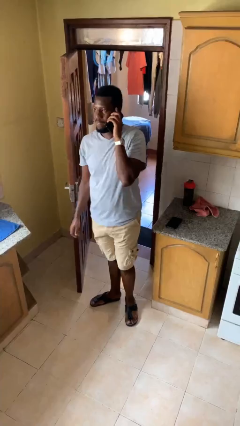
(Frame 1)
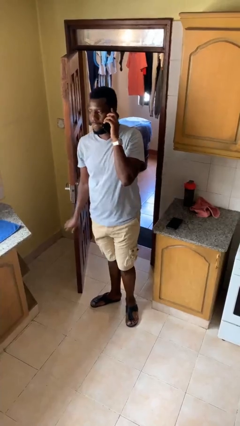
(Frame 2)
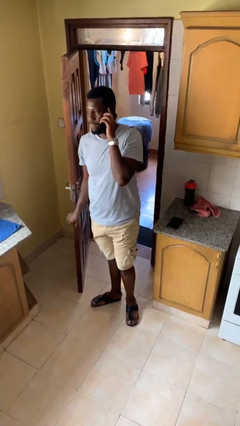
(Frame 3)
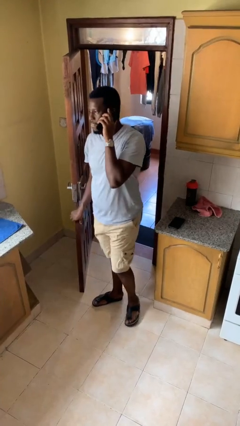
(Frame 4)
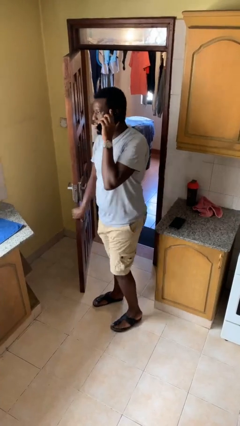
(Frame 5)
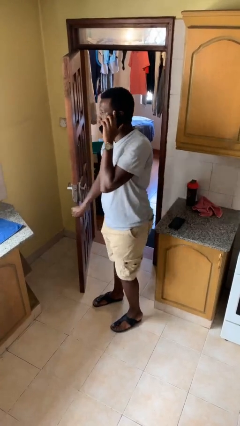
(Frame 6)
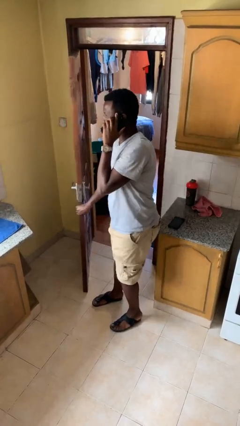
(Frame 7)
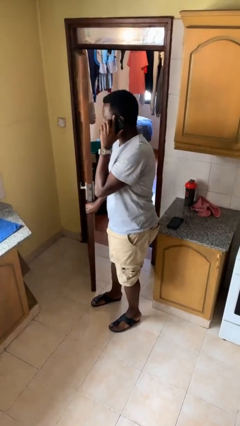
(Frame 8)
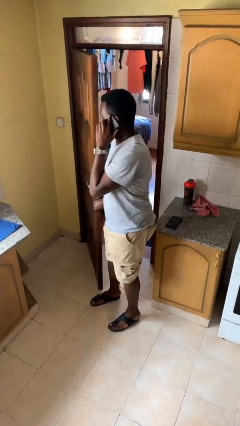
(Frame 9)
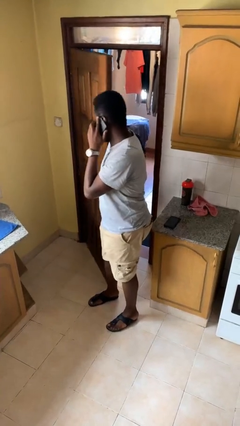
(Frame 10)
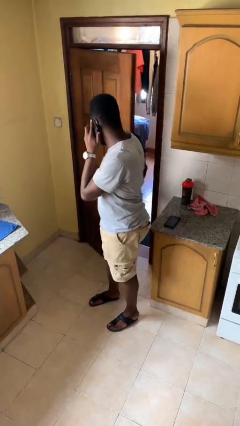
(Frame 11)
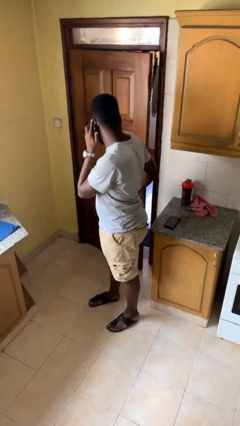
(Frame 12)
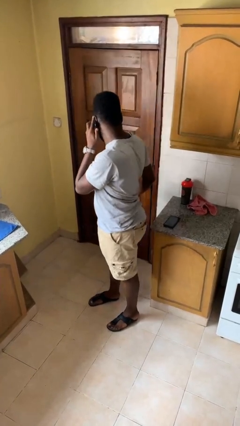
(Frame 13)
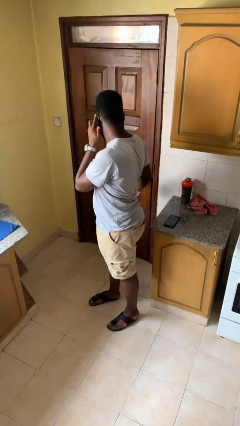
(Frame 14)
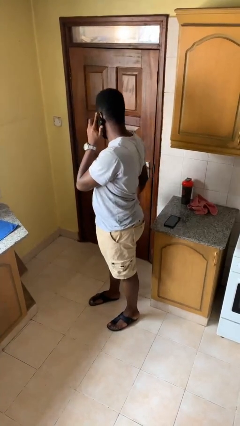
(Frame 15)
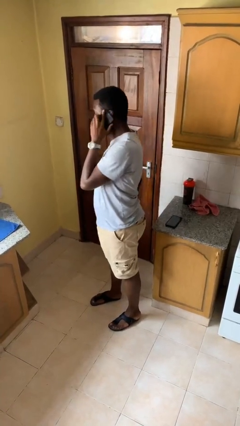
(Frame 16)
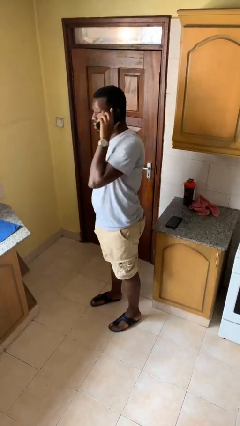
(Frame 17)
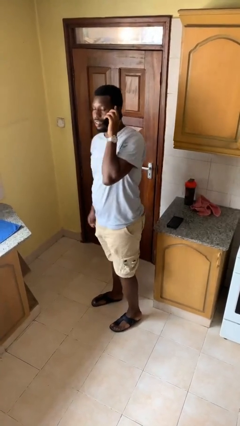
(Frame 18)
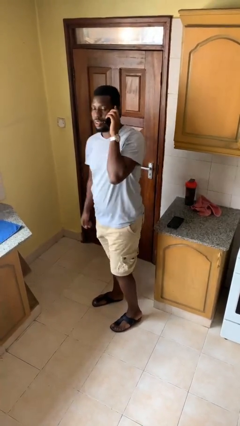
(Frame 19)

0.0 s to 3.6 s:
person closes facility door

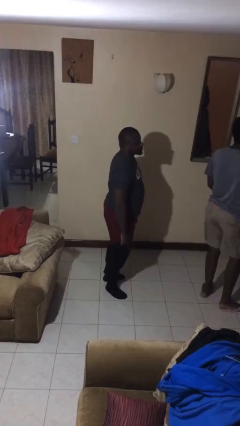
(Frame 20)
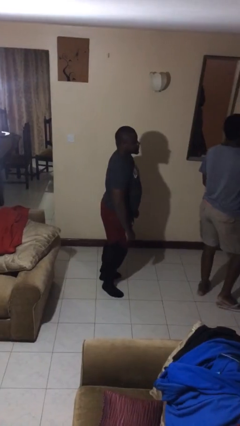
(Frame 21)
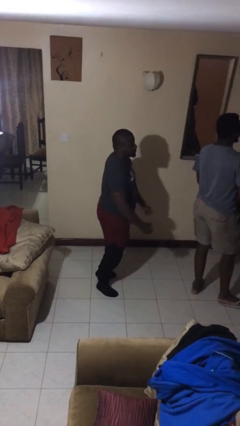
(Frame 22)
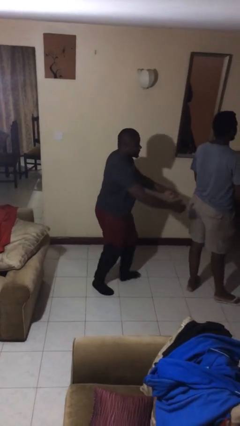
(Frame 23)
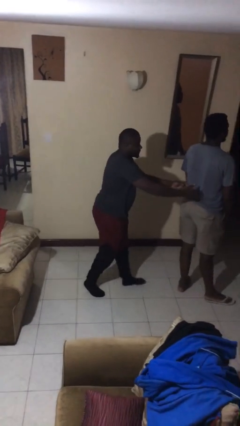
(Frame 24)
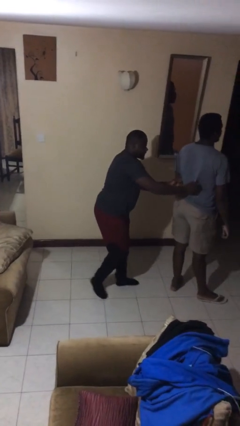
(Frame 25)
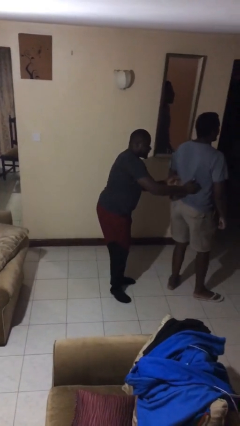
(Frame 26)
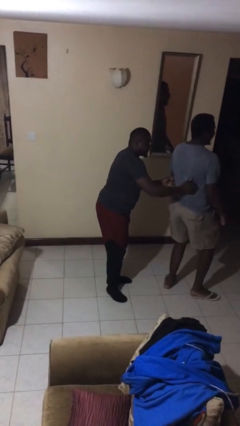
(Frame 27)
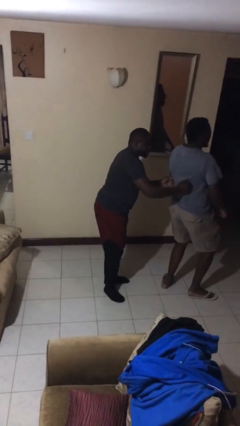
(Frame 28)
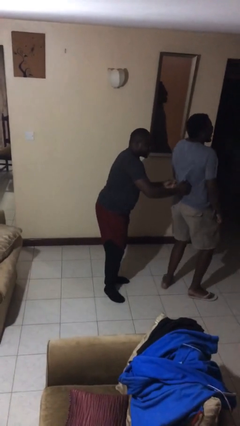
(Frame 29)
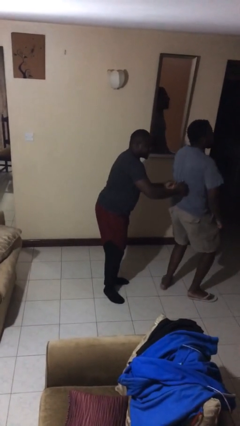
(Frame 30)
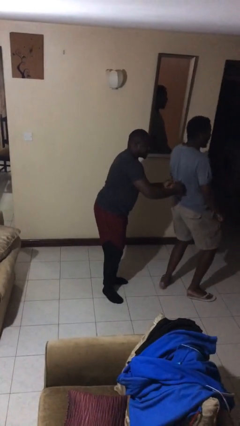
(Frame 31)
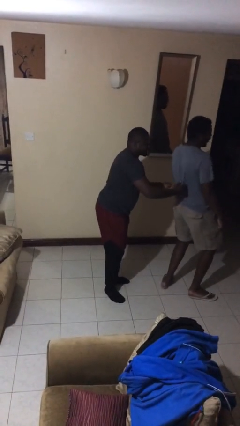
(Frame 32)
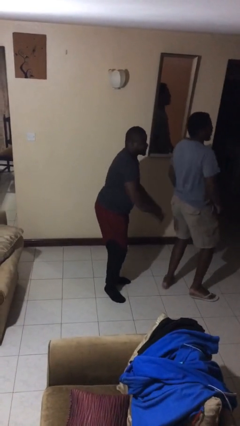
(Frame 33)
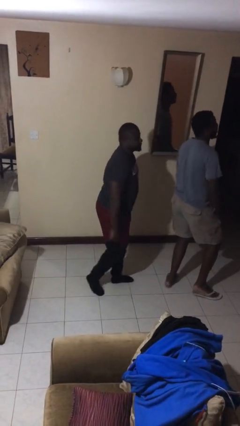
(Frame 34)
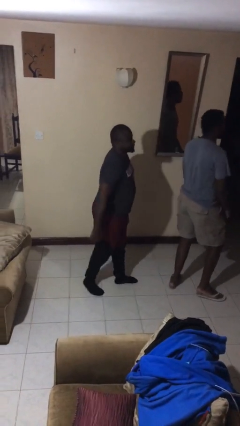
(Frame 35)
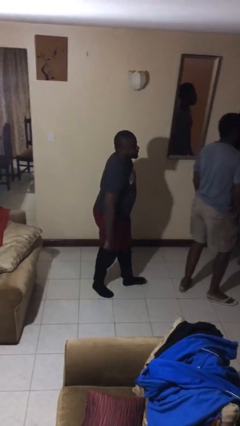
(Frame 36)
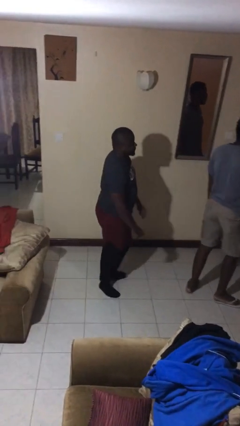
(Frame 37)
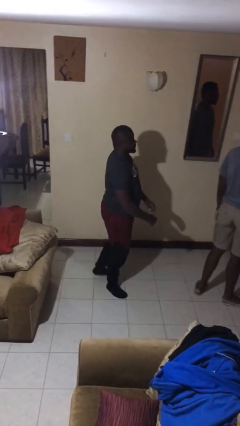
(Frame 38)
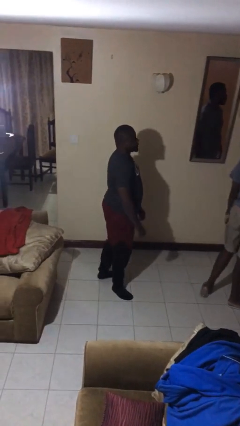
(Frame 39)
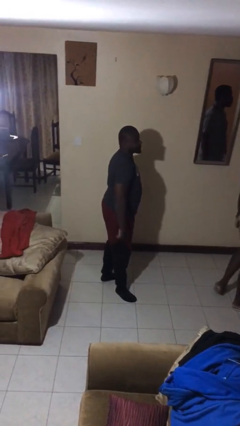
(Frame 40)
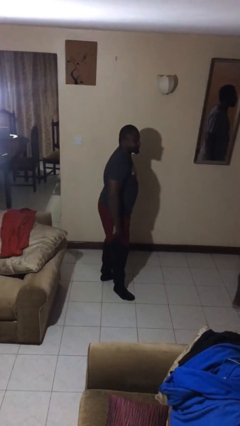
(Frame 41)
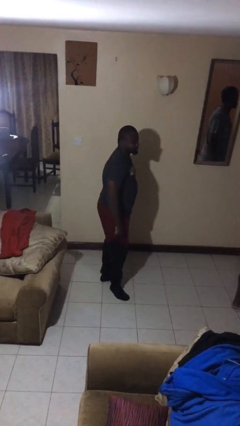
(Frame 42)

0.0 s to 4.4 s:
person tickles person

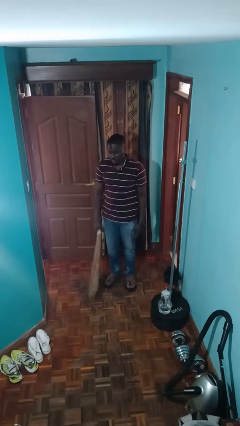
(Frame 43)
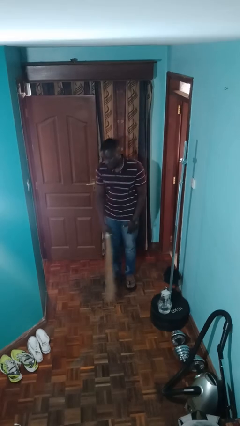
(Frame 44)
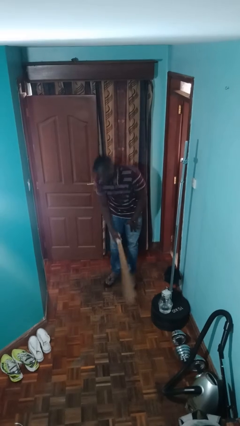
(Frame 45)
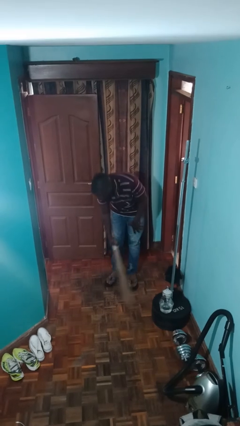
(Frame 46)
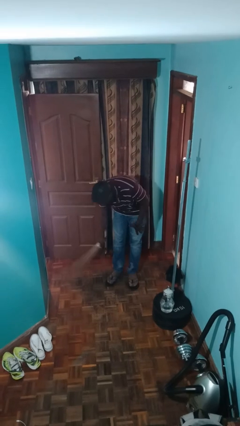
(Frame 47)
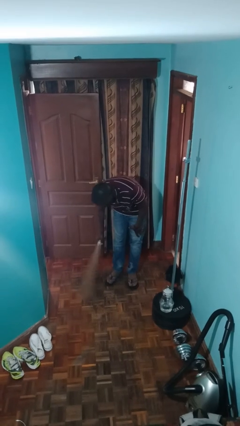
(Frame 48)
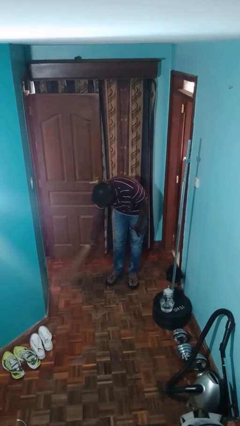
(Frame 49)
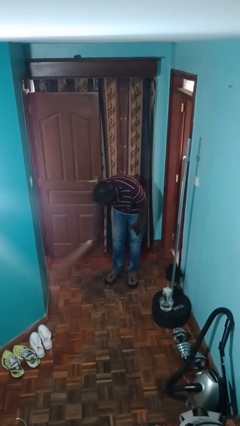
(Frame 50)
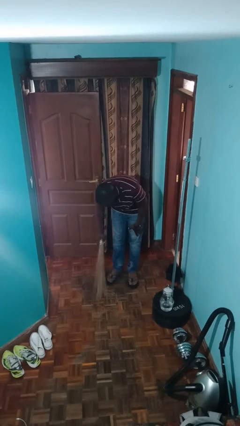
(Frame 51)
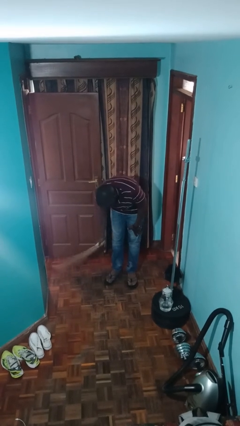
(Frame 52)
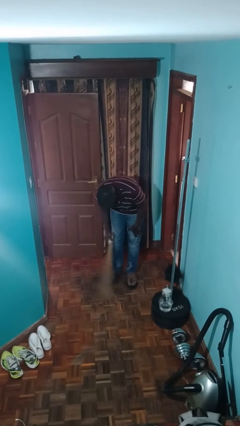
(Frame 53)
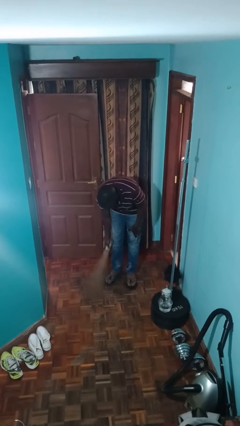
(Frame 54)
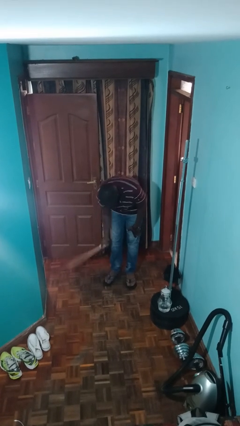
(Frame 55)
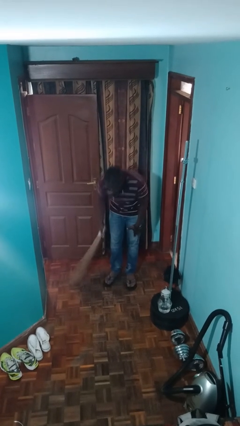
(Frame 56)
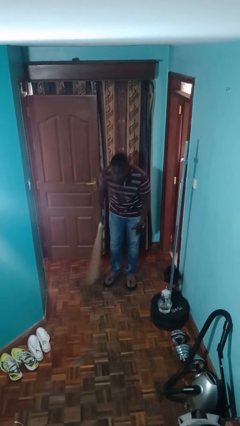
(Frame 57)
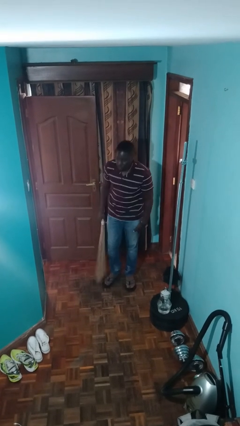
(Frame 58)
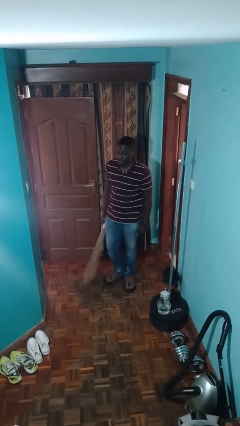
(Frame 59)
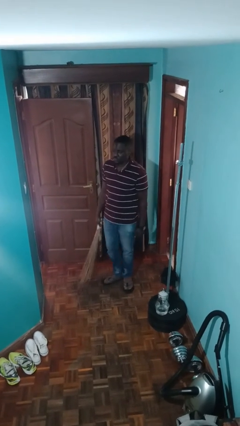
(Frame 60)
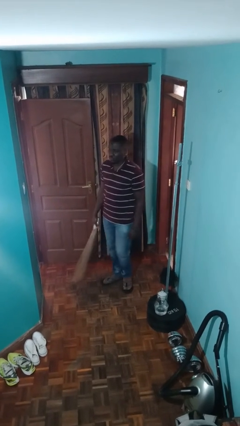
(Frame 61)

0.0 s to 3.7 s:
person sweeps floor

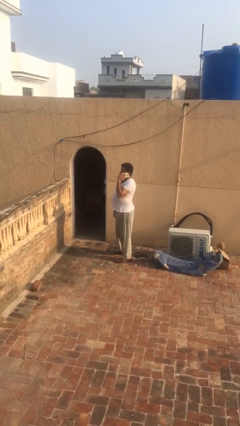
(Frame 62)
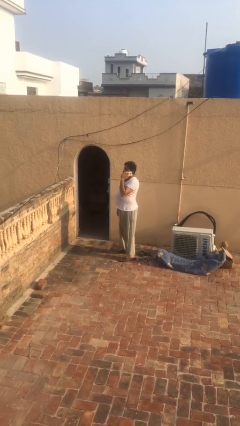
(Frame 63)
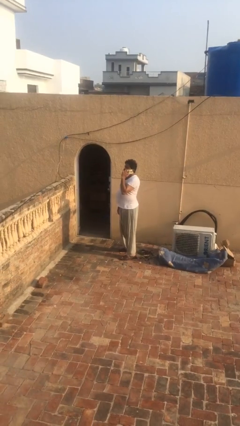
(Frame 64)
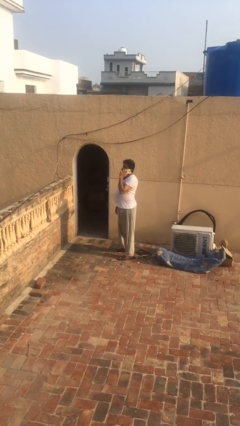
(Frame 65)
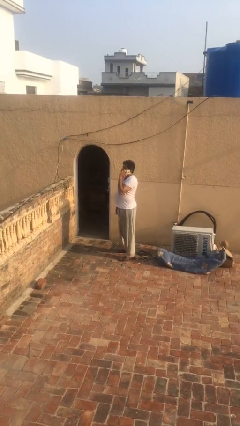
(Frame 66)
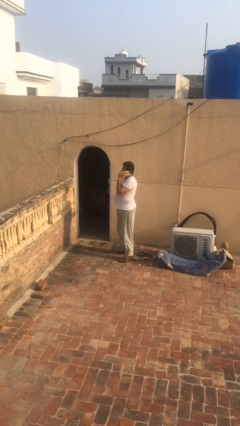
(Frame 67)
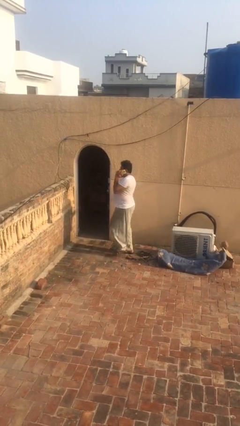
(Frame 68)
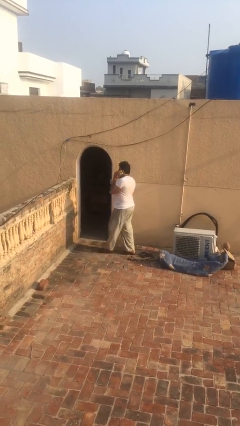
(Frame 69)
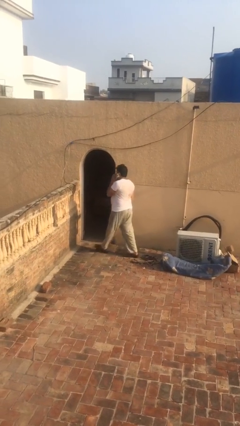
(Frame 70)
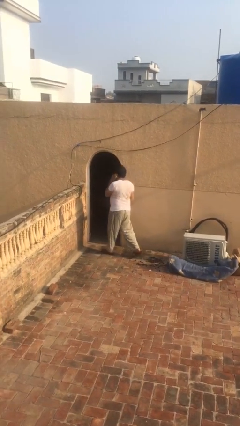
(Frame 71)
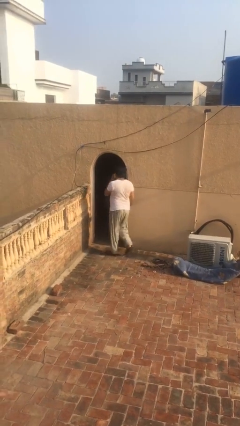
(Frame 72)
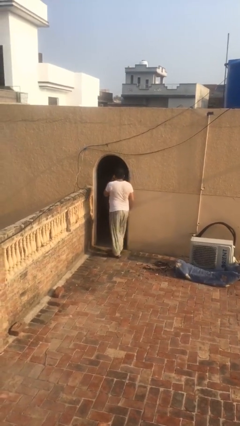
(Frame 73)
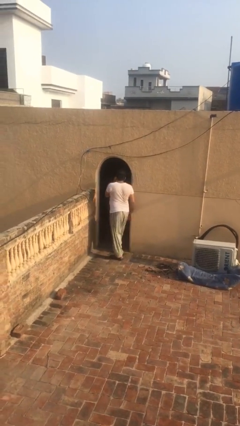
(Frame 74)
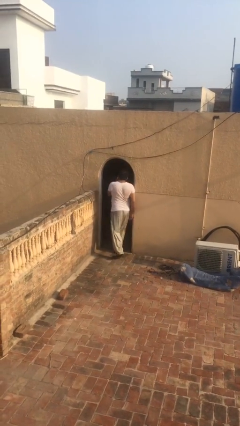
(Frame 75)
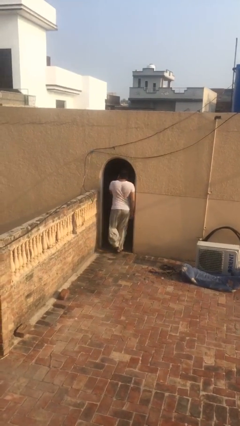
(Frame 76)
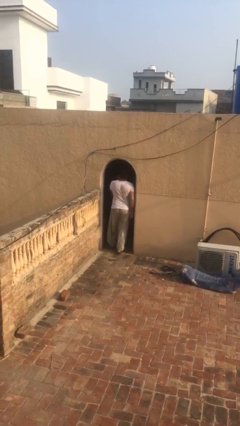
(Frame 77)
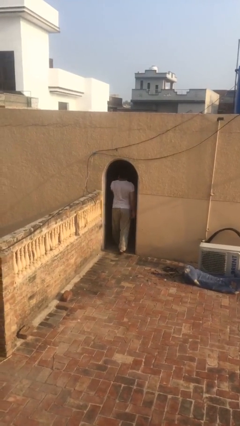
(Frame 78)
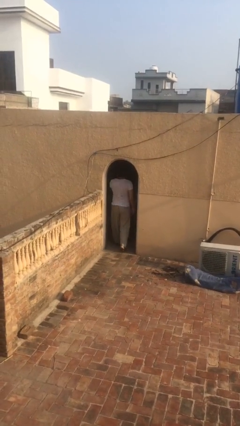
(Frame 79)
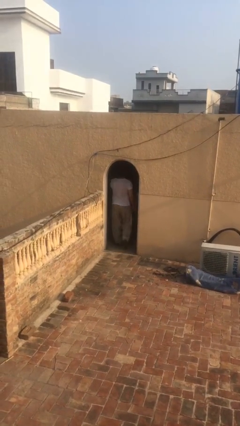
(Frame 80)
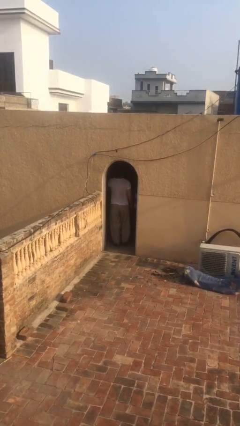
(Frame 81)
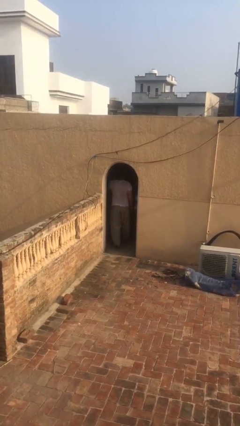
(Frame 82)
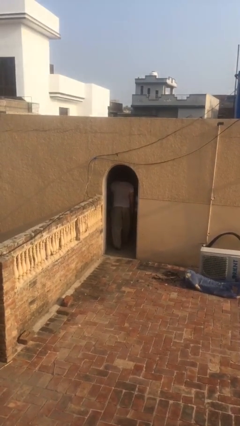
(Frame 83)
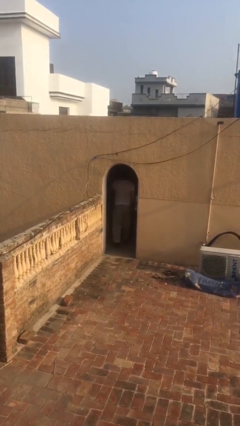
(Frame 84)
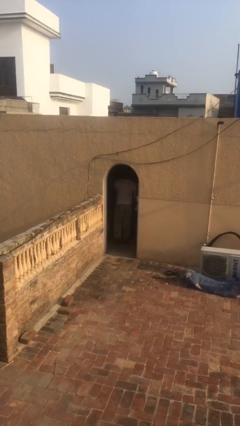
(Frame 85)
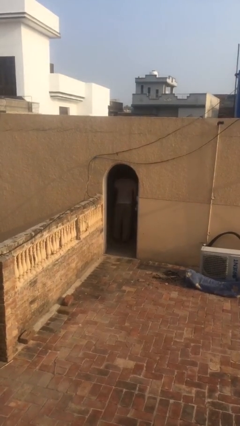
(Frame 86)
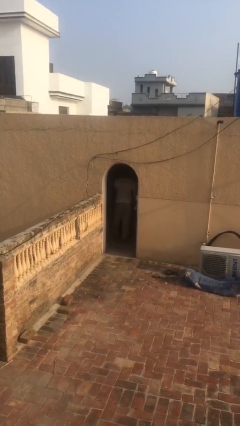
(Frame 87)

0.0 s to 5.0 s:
person exits scene through structure

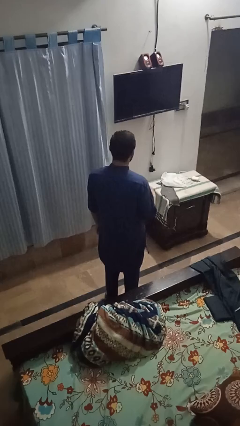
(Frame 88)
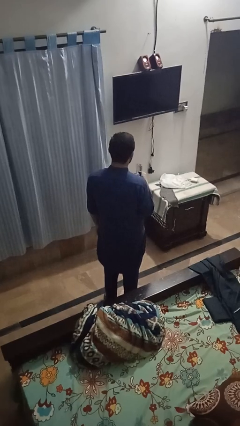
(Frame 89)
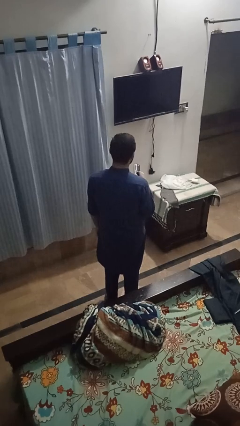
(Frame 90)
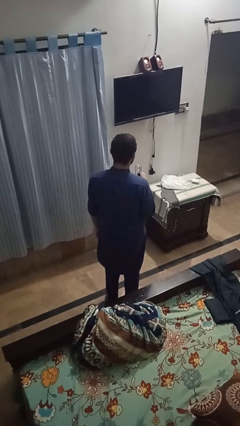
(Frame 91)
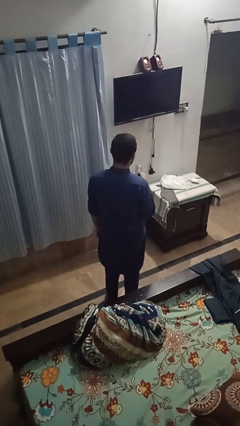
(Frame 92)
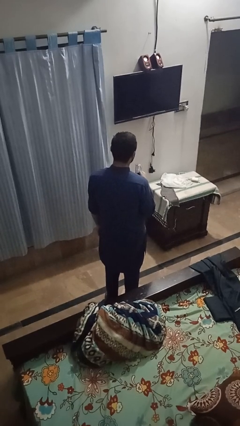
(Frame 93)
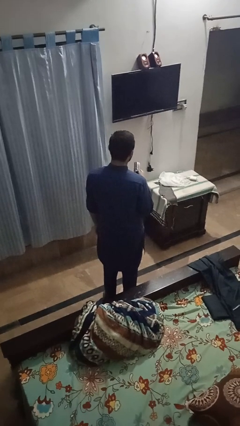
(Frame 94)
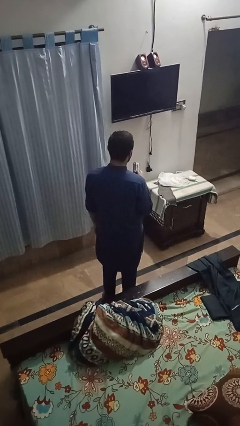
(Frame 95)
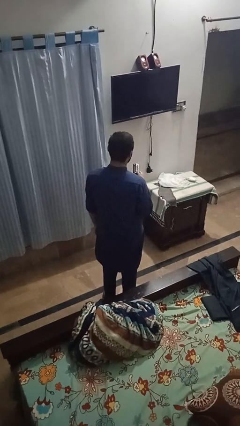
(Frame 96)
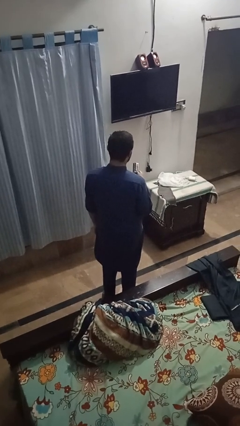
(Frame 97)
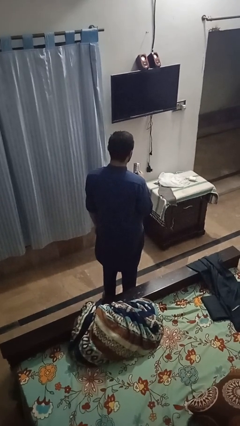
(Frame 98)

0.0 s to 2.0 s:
person uses television remote
